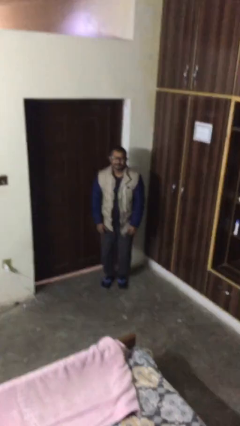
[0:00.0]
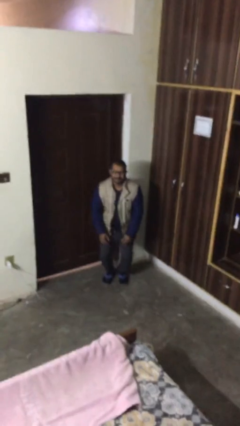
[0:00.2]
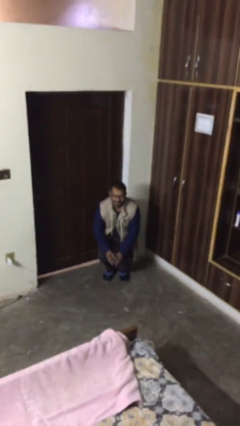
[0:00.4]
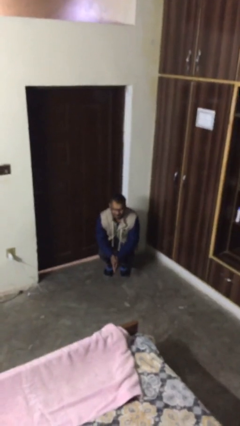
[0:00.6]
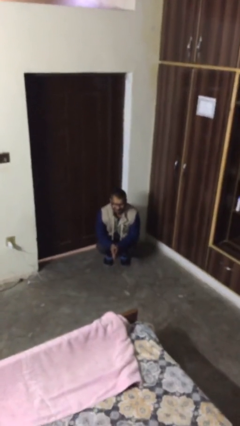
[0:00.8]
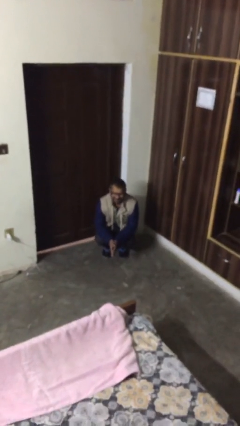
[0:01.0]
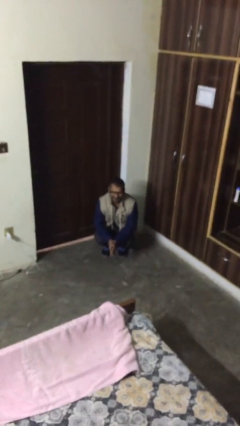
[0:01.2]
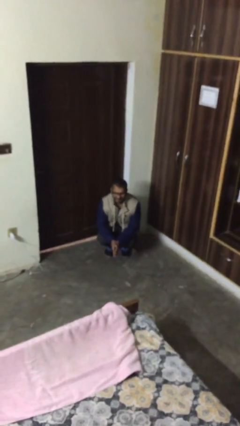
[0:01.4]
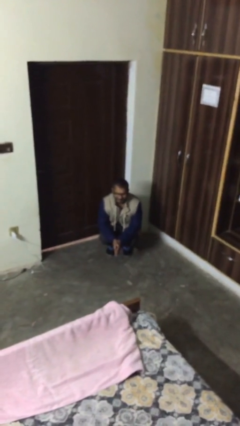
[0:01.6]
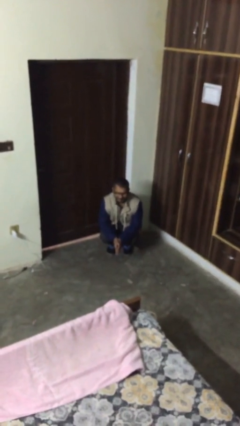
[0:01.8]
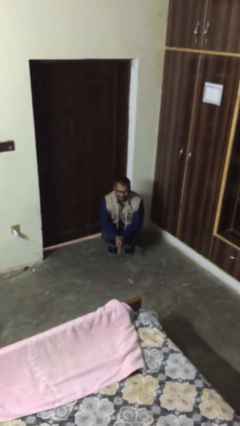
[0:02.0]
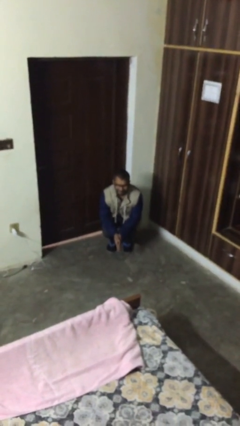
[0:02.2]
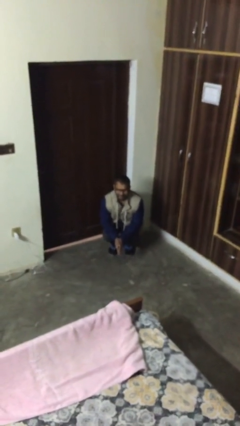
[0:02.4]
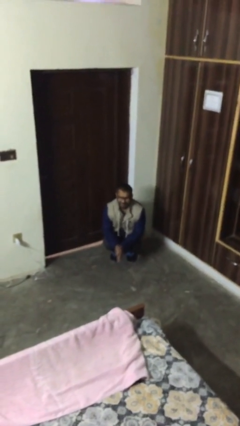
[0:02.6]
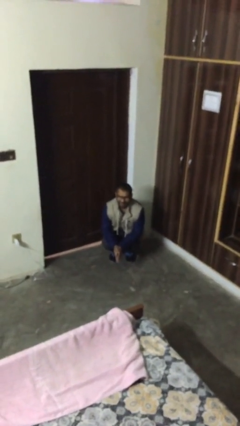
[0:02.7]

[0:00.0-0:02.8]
person sits down

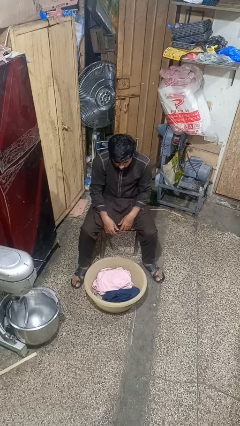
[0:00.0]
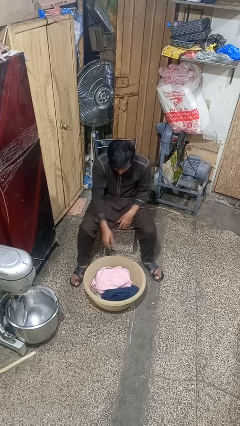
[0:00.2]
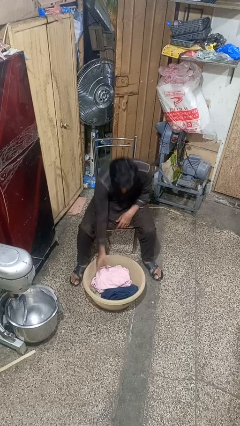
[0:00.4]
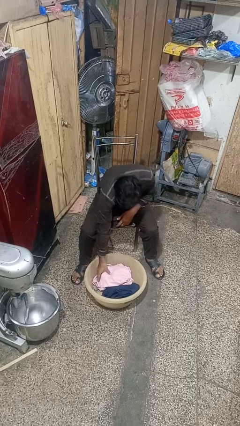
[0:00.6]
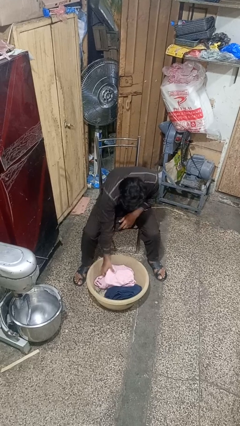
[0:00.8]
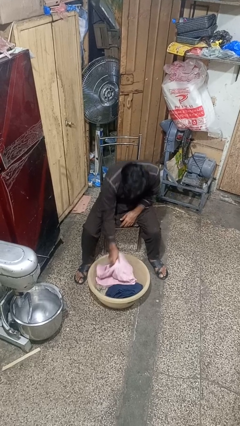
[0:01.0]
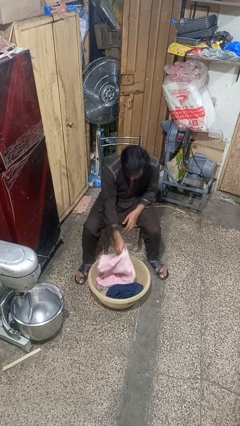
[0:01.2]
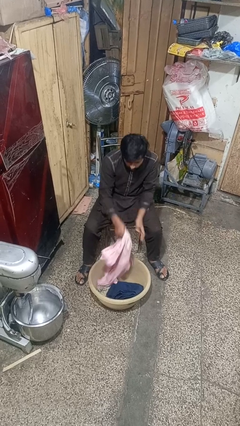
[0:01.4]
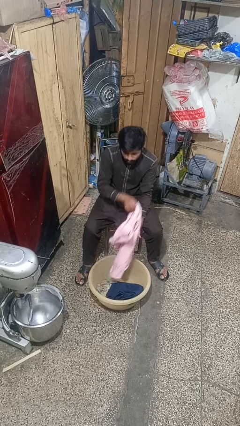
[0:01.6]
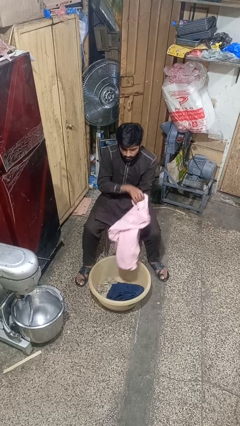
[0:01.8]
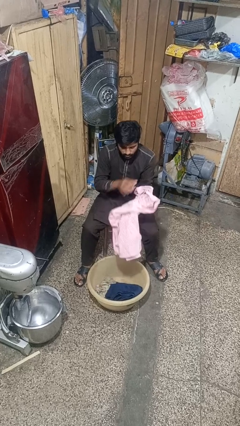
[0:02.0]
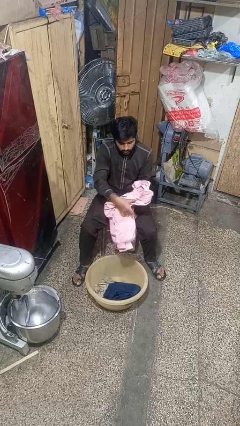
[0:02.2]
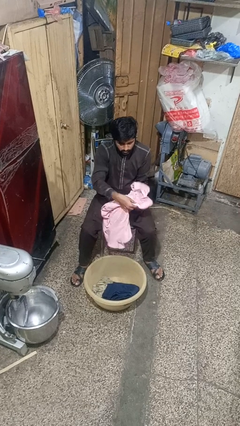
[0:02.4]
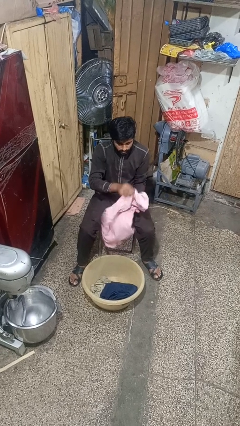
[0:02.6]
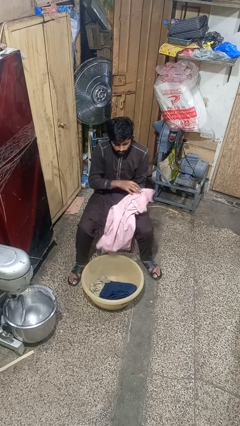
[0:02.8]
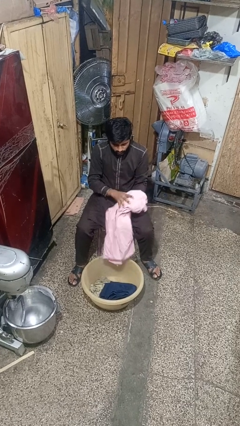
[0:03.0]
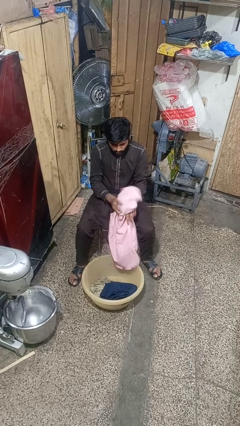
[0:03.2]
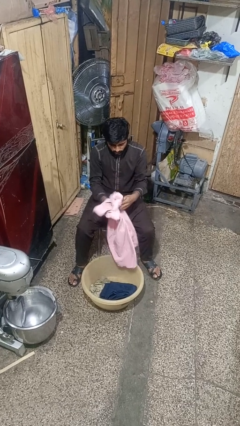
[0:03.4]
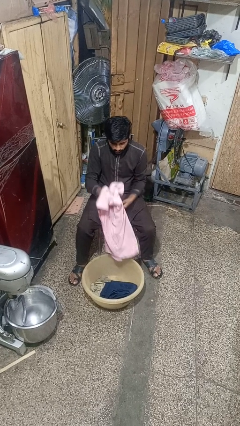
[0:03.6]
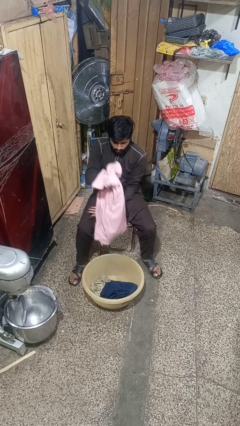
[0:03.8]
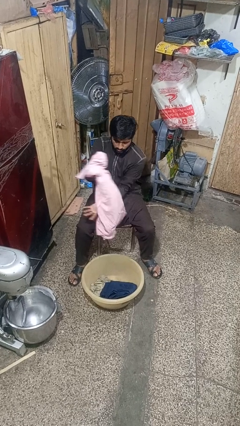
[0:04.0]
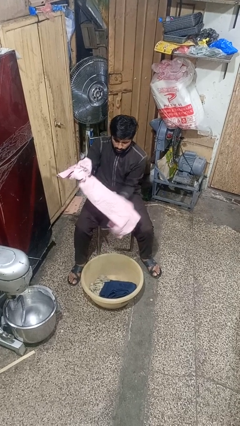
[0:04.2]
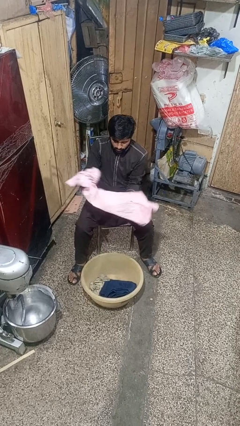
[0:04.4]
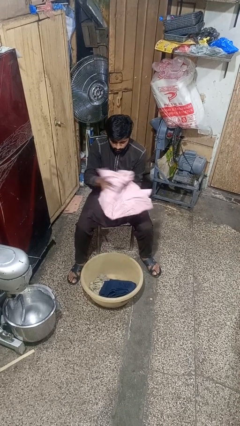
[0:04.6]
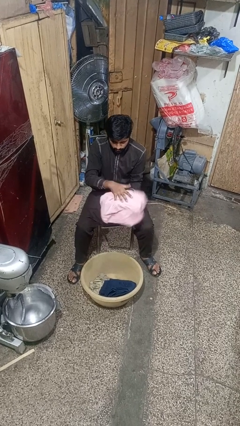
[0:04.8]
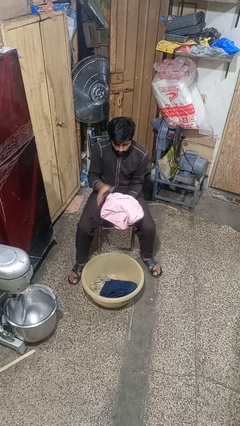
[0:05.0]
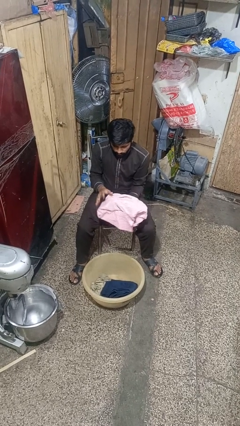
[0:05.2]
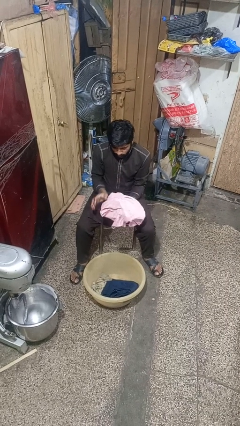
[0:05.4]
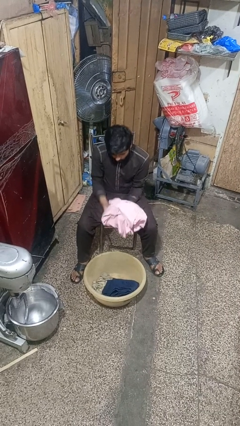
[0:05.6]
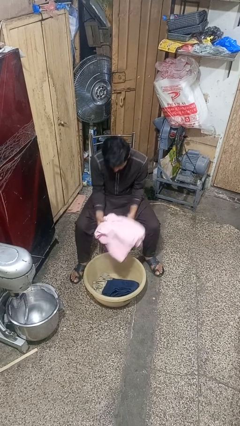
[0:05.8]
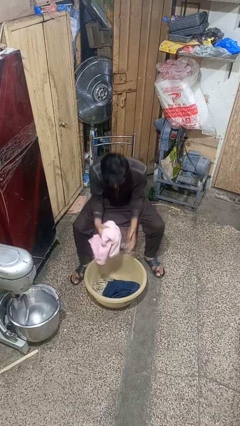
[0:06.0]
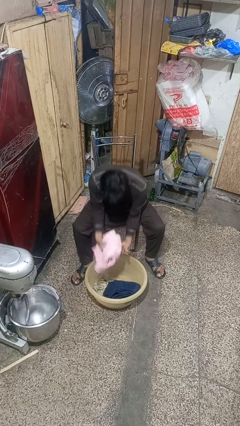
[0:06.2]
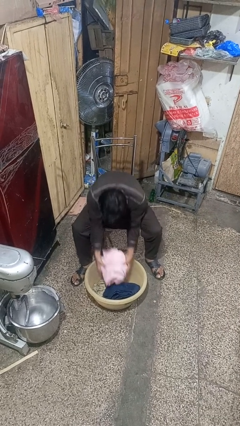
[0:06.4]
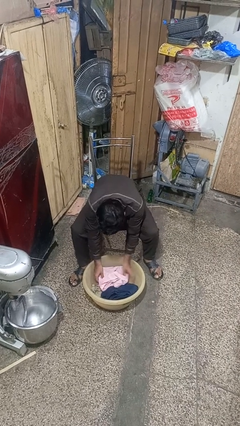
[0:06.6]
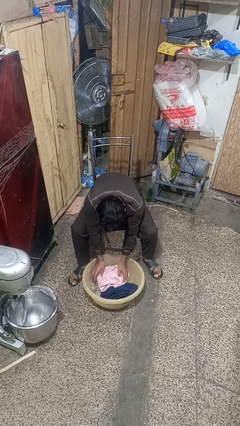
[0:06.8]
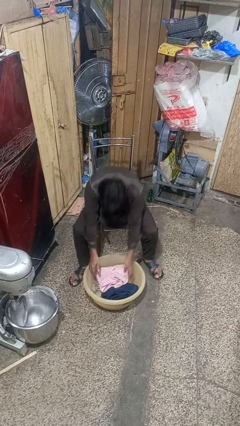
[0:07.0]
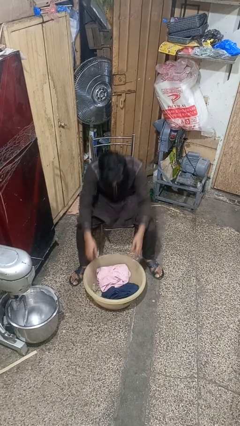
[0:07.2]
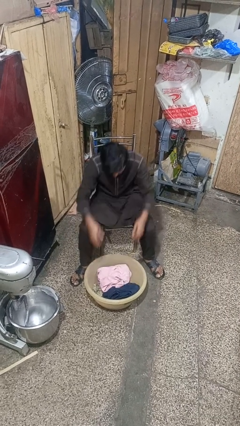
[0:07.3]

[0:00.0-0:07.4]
person folds shirt

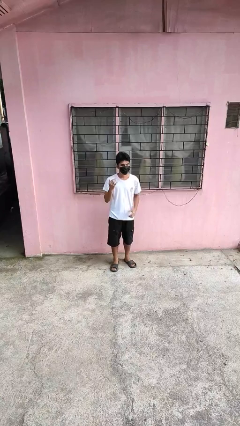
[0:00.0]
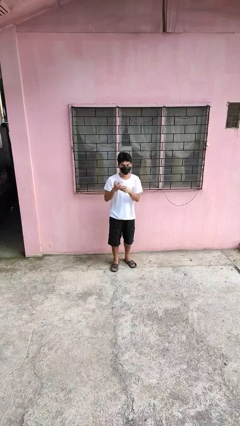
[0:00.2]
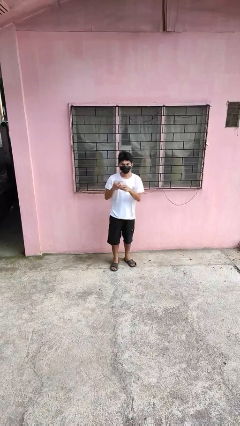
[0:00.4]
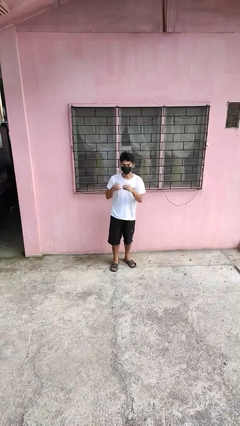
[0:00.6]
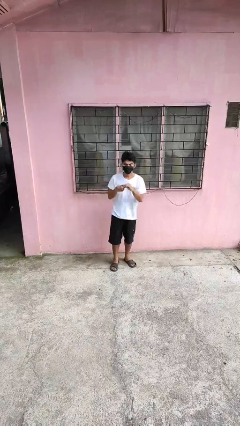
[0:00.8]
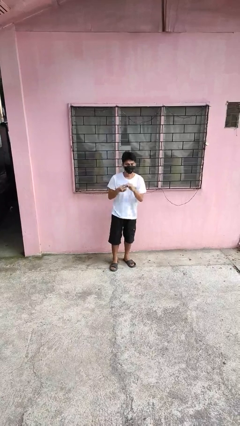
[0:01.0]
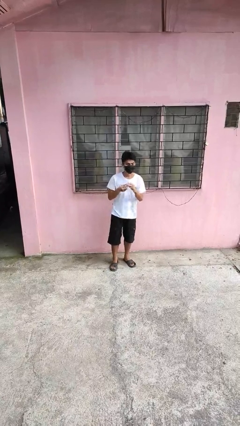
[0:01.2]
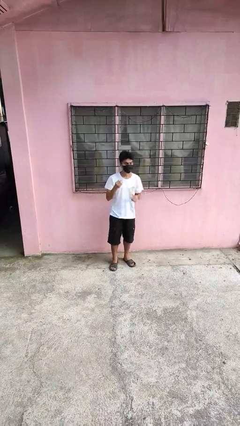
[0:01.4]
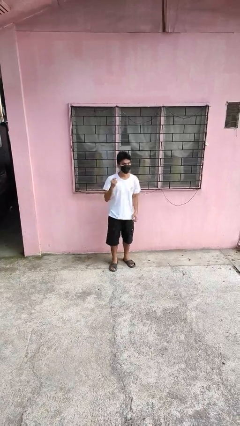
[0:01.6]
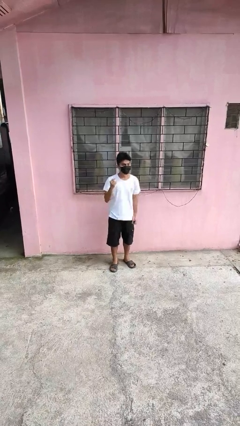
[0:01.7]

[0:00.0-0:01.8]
person takes off ring

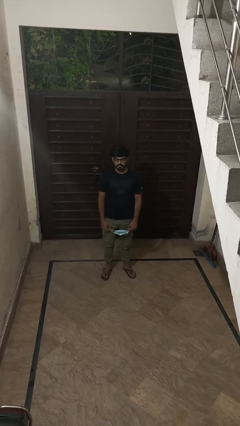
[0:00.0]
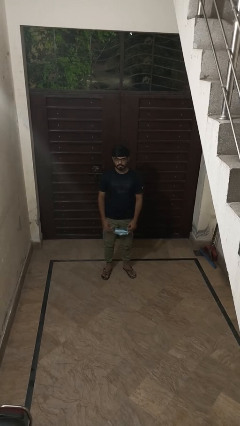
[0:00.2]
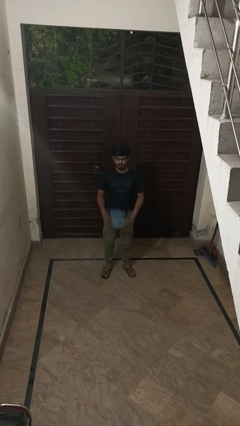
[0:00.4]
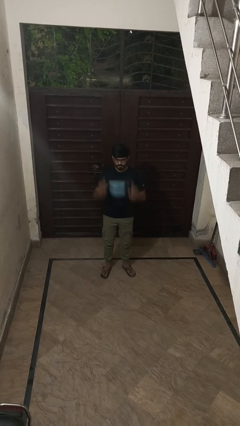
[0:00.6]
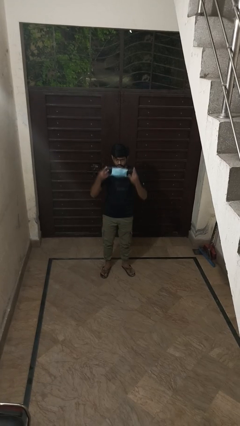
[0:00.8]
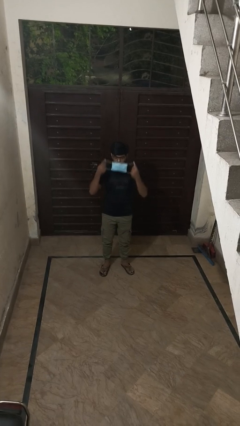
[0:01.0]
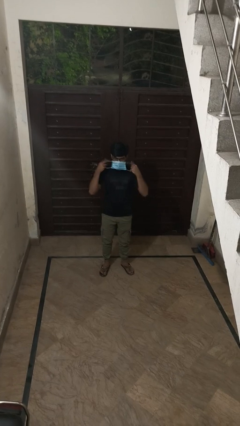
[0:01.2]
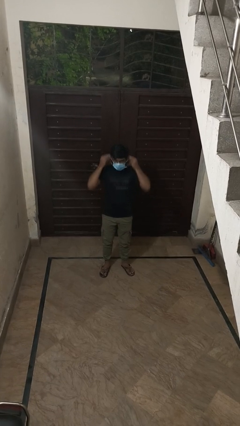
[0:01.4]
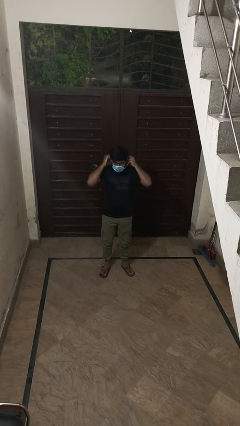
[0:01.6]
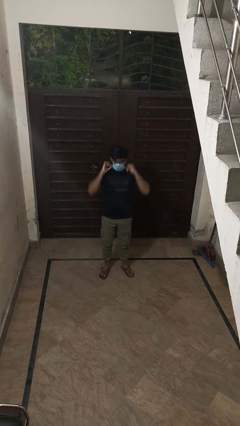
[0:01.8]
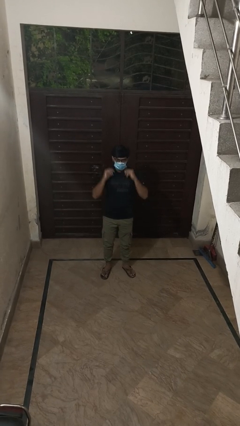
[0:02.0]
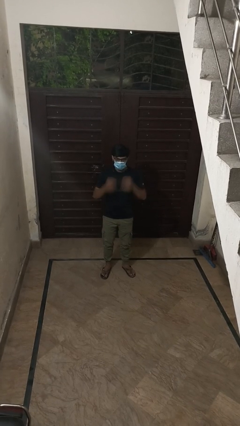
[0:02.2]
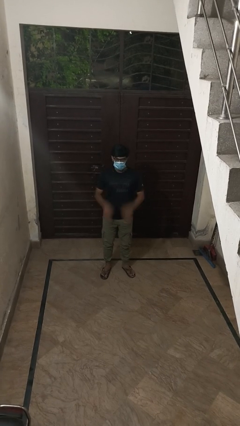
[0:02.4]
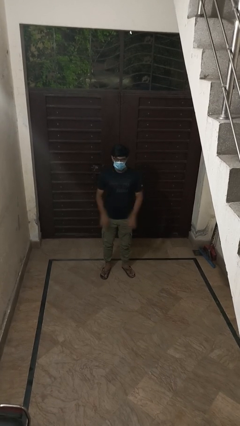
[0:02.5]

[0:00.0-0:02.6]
person puts on facemask

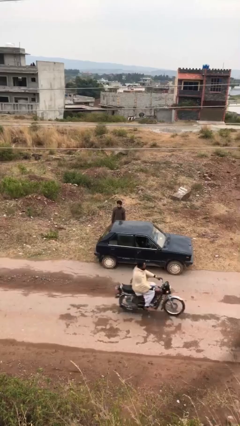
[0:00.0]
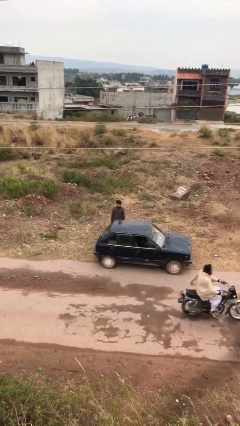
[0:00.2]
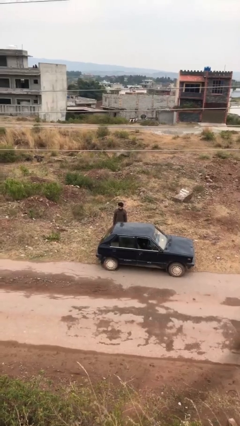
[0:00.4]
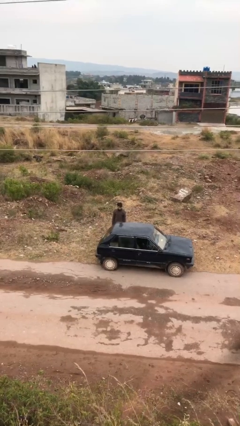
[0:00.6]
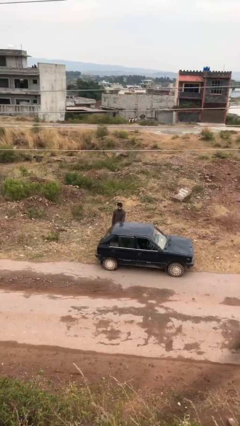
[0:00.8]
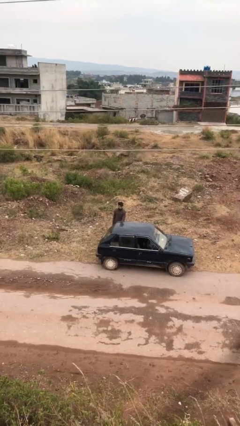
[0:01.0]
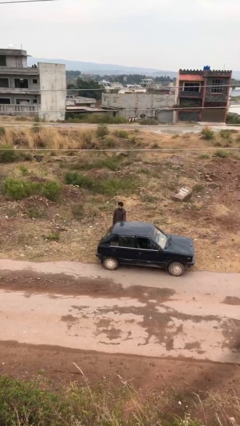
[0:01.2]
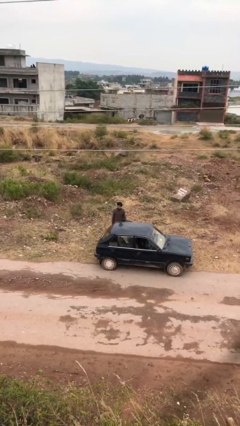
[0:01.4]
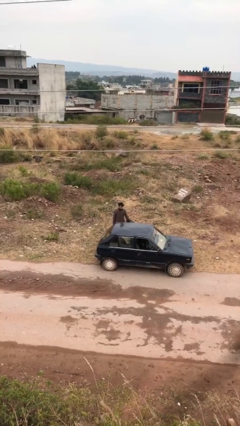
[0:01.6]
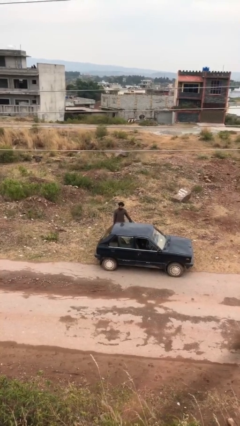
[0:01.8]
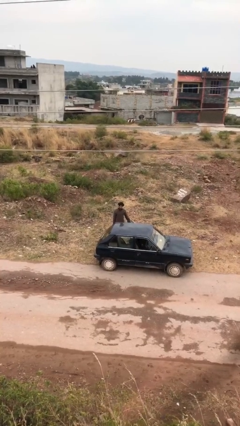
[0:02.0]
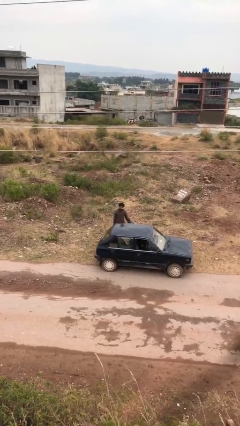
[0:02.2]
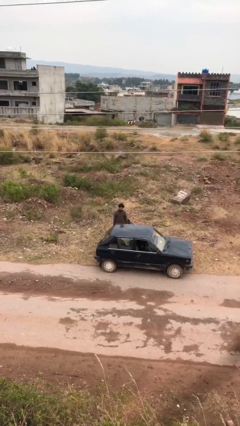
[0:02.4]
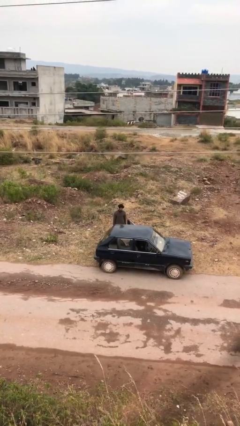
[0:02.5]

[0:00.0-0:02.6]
person opens car door
